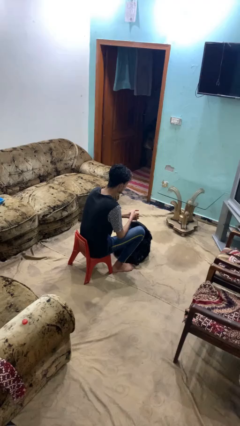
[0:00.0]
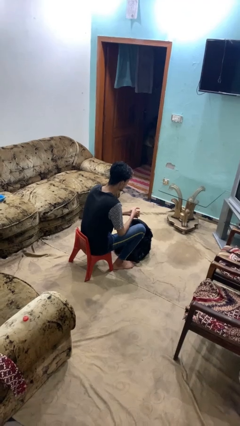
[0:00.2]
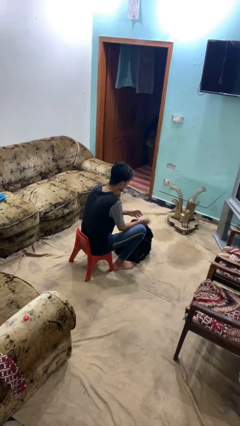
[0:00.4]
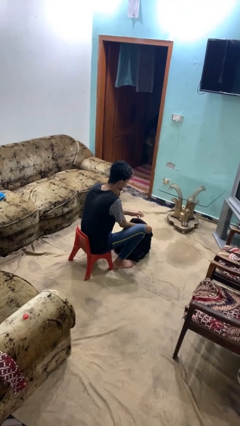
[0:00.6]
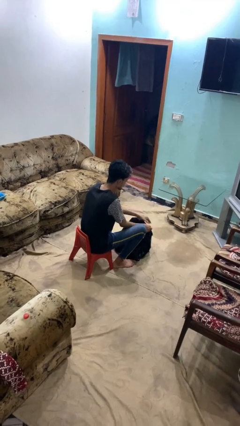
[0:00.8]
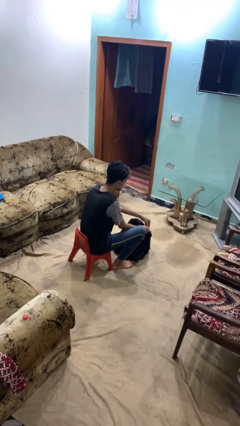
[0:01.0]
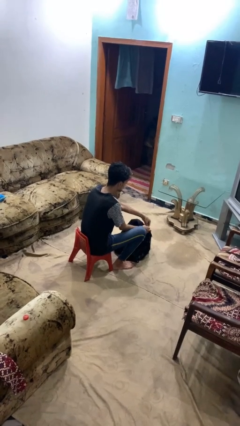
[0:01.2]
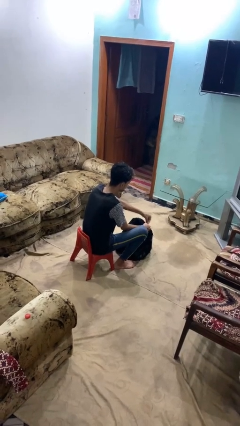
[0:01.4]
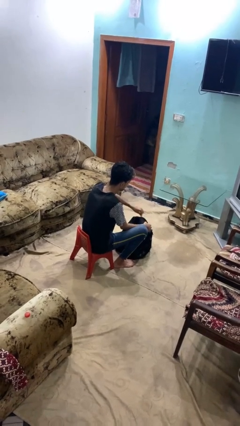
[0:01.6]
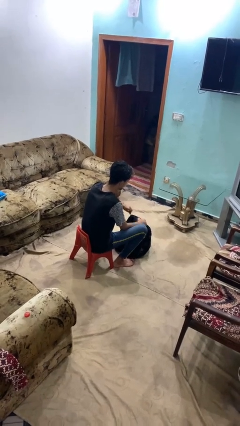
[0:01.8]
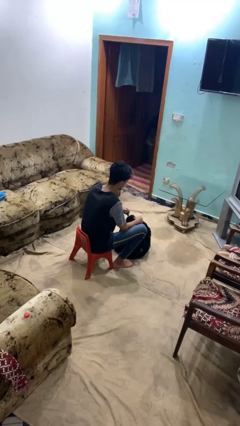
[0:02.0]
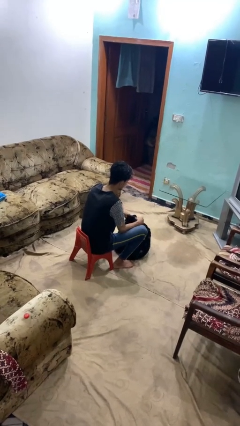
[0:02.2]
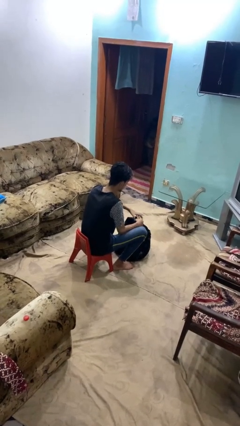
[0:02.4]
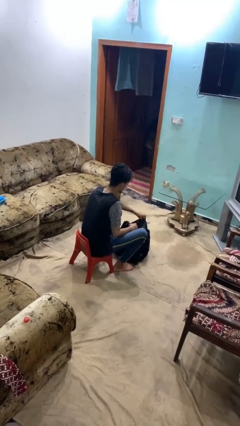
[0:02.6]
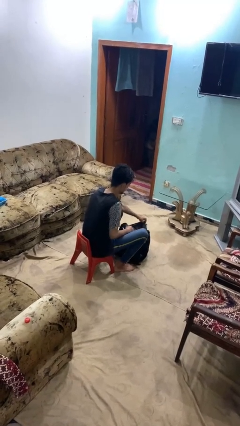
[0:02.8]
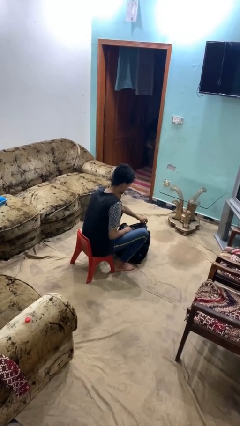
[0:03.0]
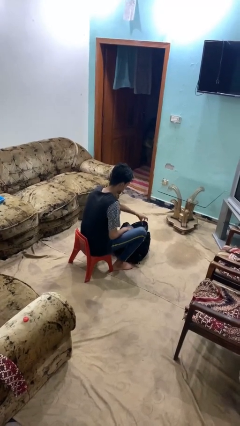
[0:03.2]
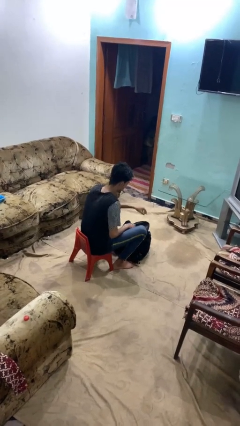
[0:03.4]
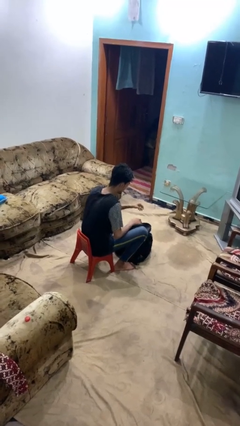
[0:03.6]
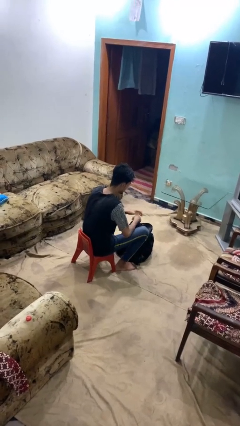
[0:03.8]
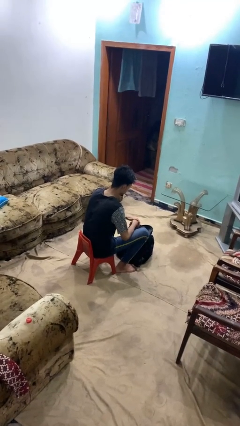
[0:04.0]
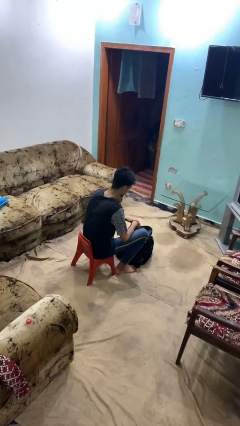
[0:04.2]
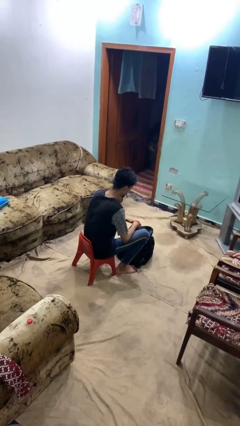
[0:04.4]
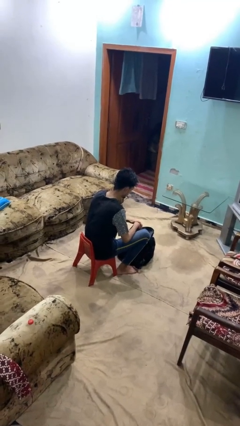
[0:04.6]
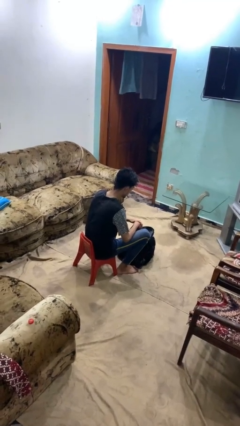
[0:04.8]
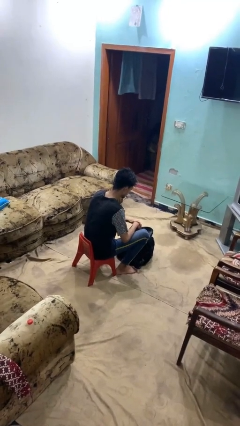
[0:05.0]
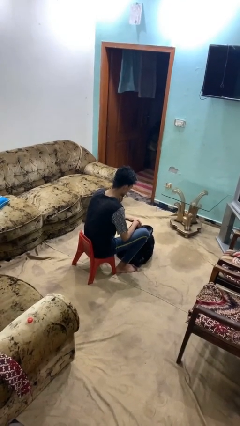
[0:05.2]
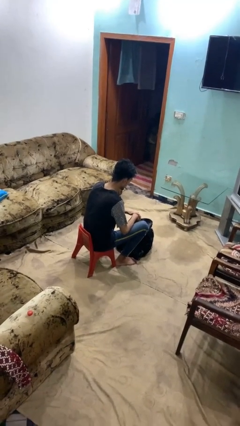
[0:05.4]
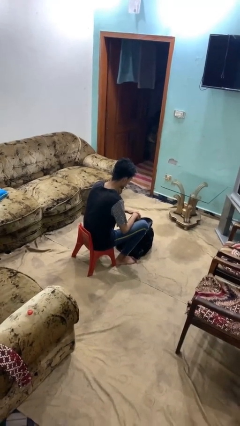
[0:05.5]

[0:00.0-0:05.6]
person puts on backpack

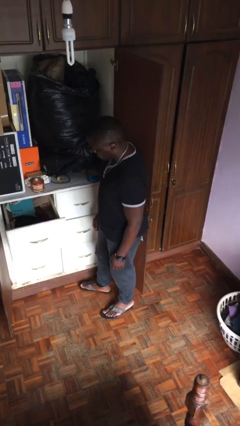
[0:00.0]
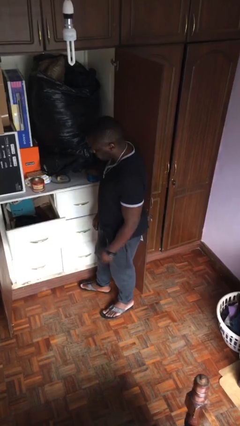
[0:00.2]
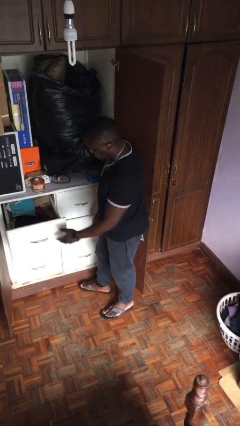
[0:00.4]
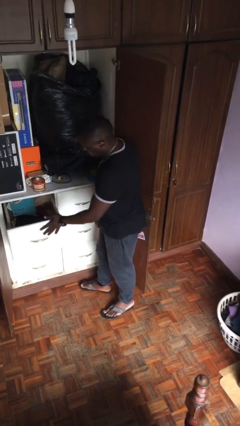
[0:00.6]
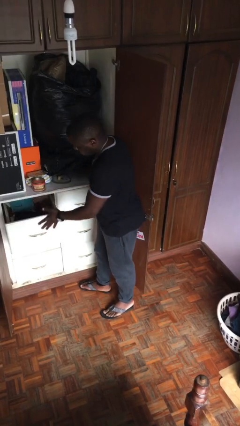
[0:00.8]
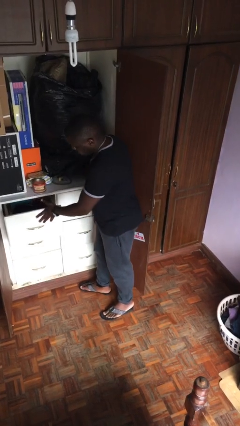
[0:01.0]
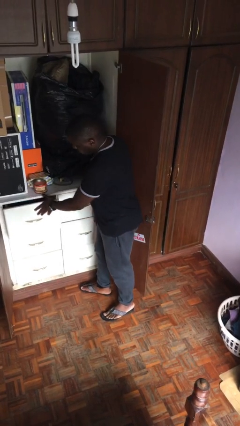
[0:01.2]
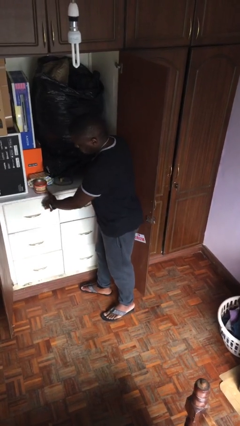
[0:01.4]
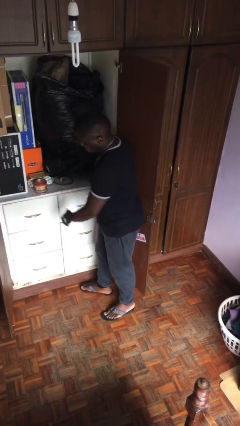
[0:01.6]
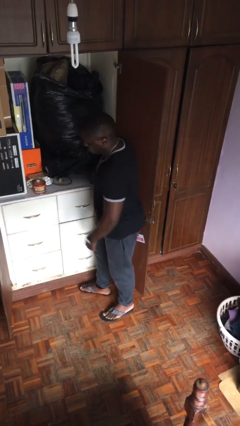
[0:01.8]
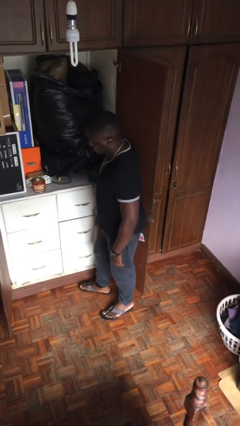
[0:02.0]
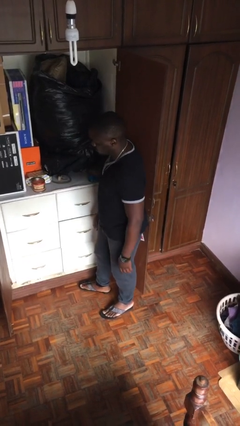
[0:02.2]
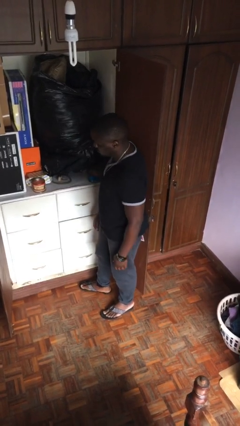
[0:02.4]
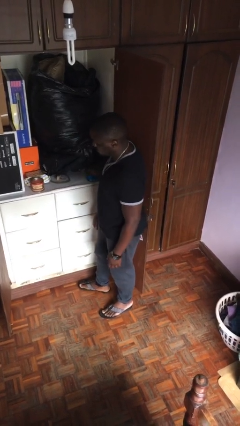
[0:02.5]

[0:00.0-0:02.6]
person closes dresser drawer

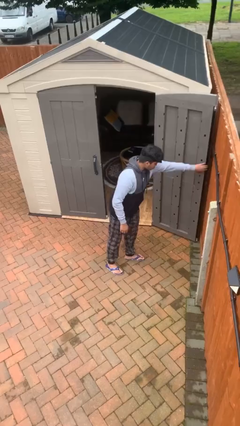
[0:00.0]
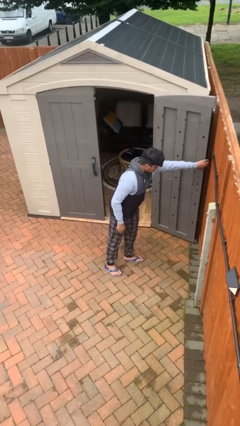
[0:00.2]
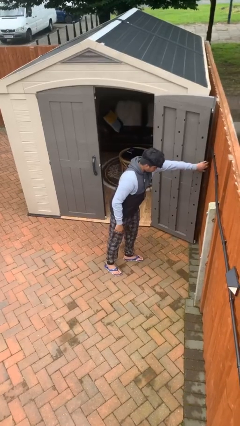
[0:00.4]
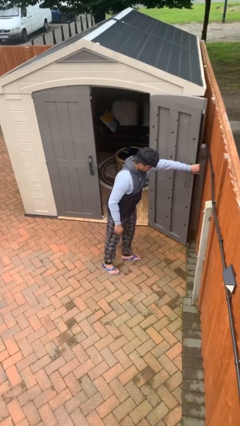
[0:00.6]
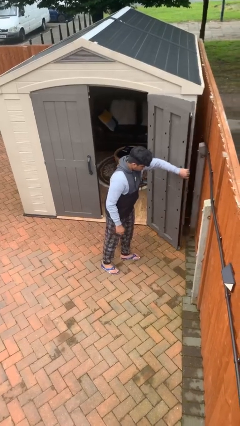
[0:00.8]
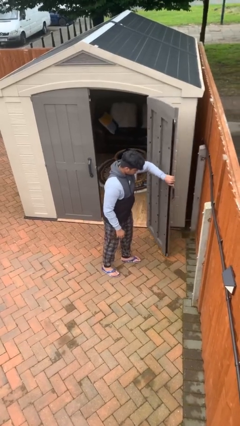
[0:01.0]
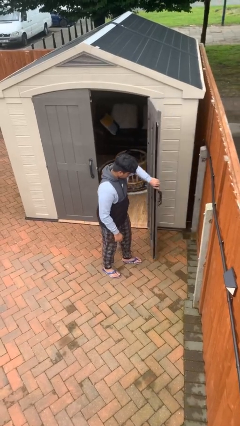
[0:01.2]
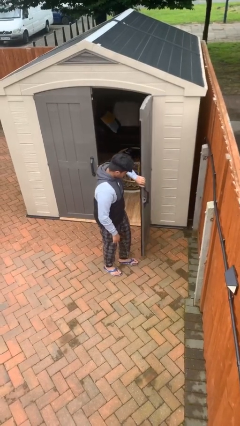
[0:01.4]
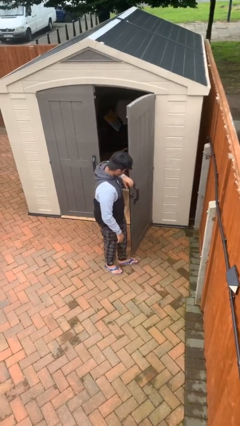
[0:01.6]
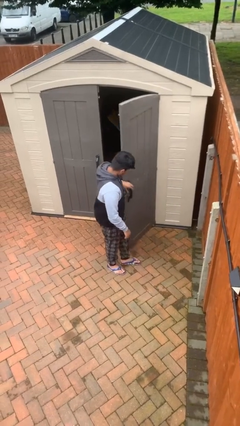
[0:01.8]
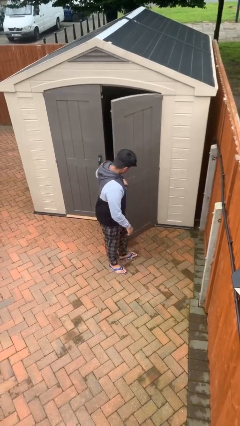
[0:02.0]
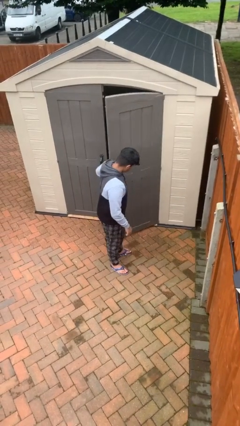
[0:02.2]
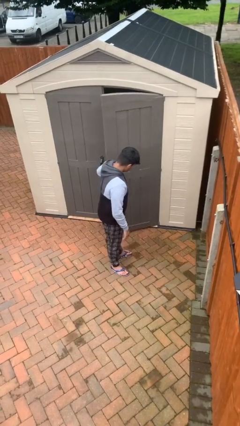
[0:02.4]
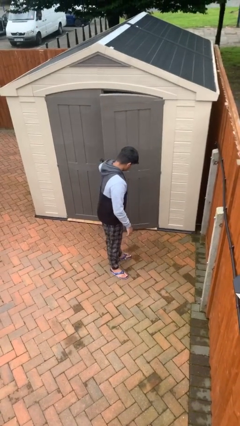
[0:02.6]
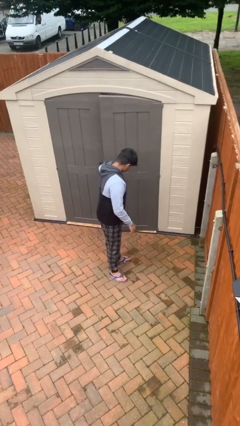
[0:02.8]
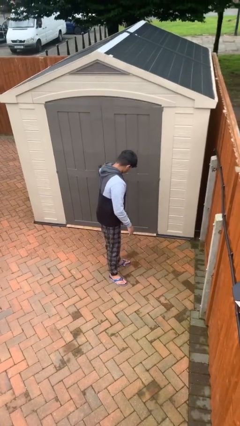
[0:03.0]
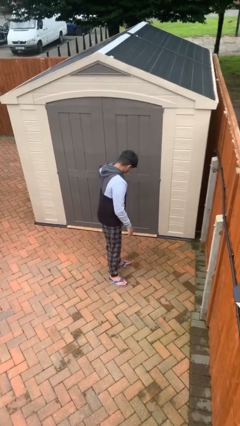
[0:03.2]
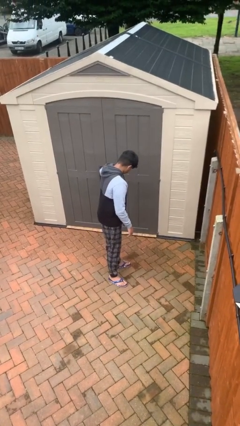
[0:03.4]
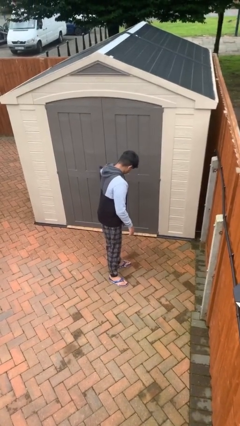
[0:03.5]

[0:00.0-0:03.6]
person closes facility door

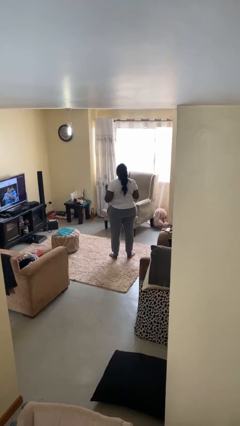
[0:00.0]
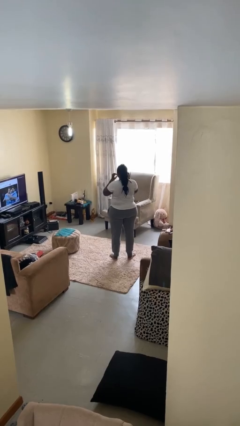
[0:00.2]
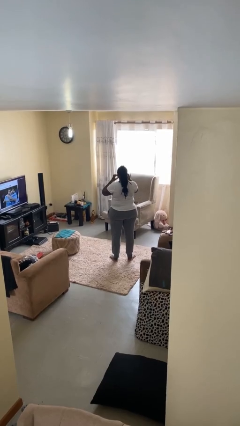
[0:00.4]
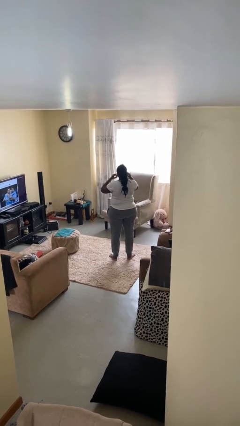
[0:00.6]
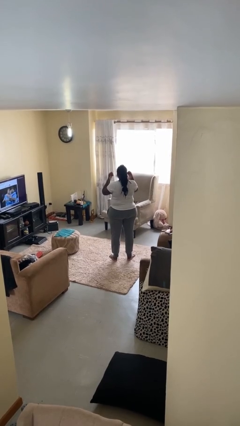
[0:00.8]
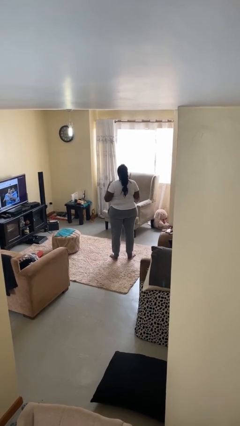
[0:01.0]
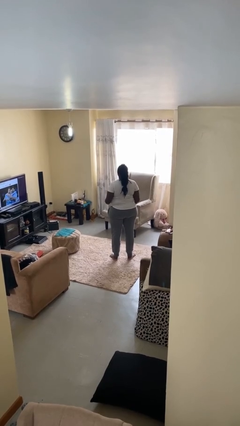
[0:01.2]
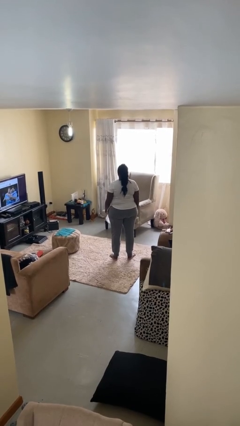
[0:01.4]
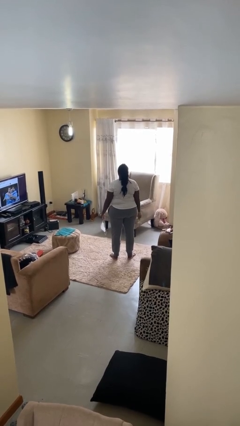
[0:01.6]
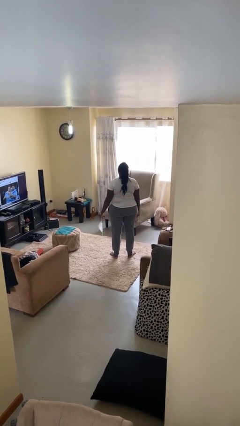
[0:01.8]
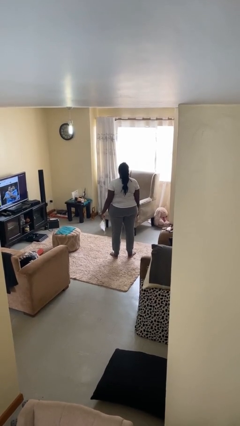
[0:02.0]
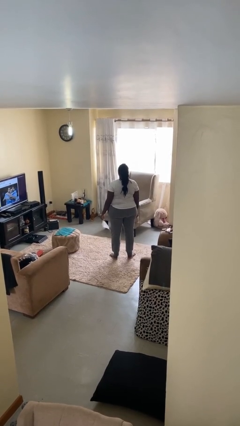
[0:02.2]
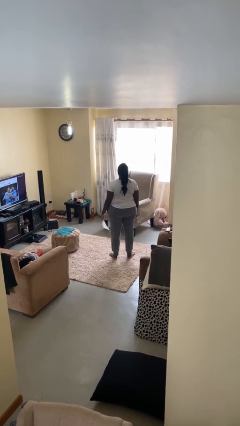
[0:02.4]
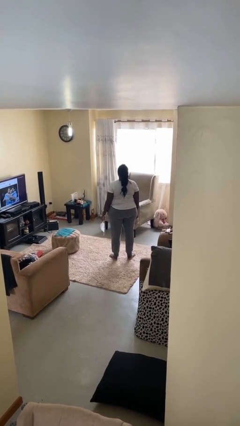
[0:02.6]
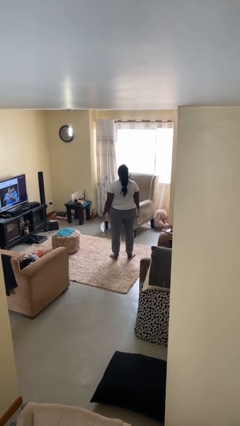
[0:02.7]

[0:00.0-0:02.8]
person takes off facemask

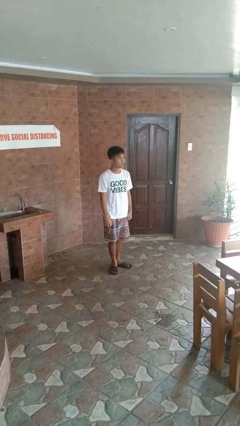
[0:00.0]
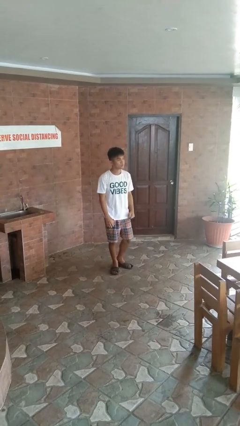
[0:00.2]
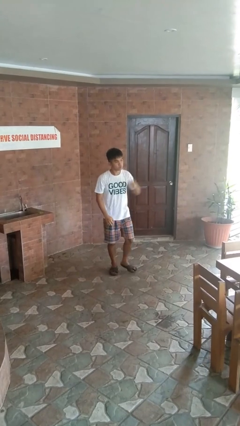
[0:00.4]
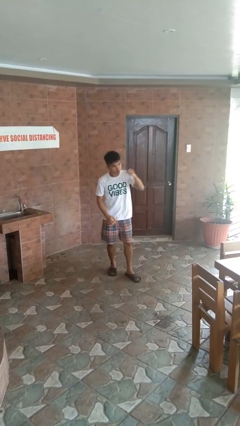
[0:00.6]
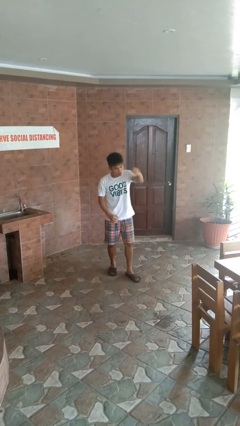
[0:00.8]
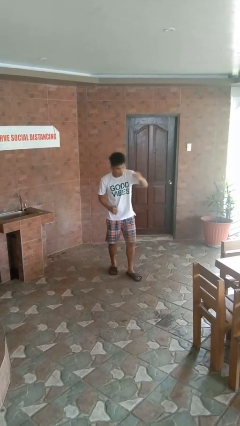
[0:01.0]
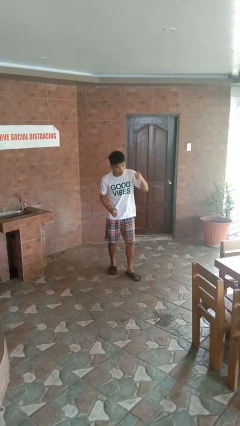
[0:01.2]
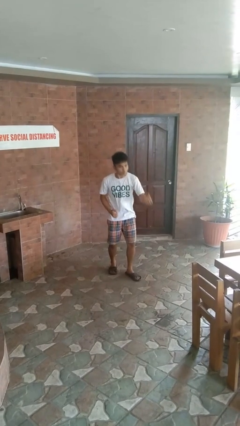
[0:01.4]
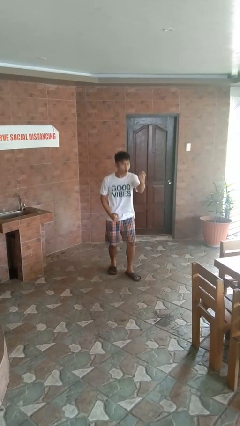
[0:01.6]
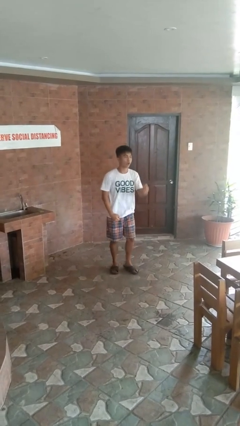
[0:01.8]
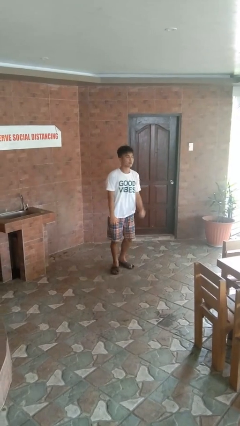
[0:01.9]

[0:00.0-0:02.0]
person punches

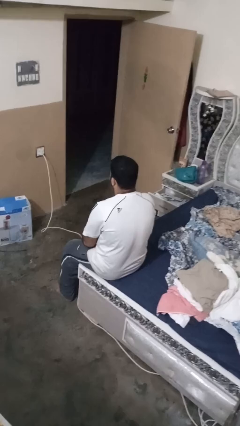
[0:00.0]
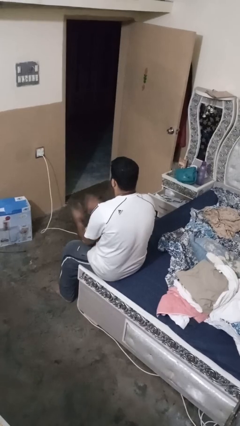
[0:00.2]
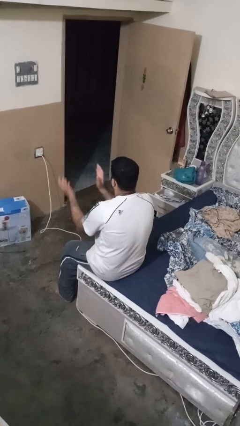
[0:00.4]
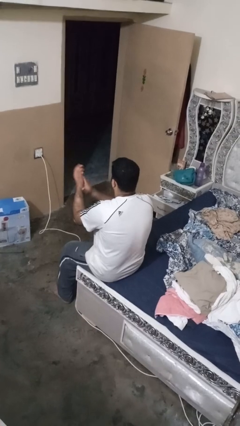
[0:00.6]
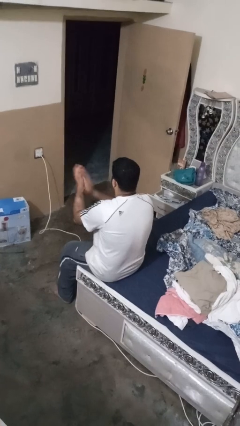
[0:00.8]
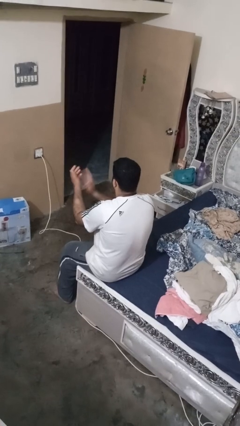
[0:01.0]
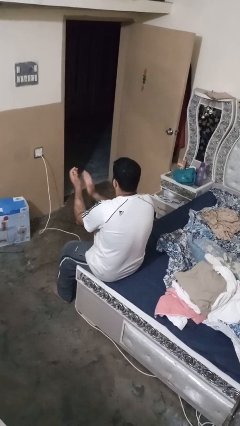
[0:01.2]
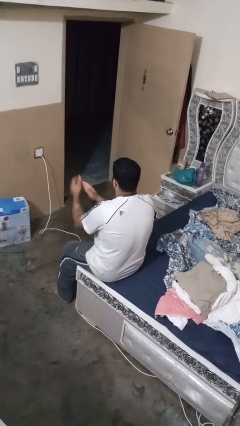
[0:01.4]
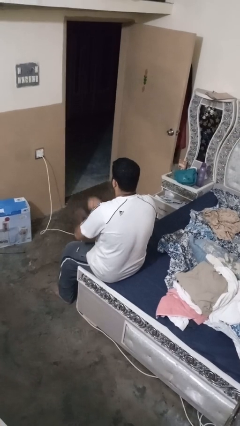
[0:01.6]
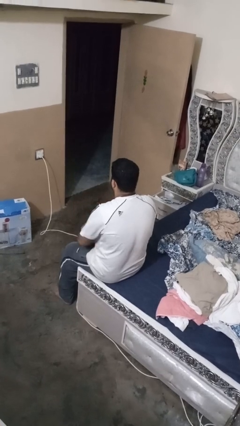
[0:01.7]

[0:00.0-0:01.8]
person claps hands
